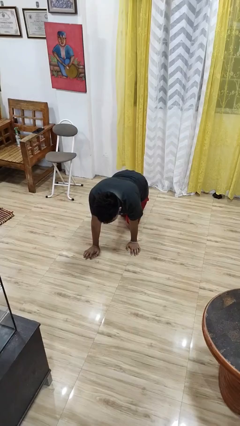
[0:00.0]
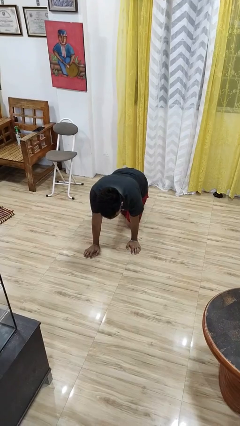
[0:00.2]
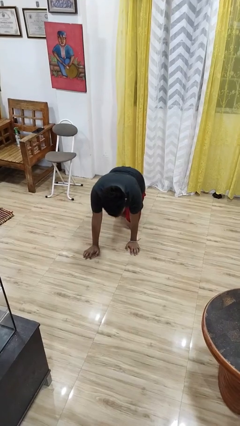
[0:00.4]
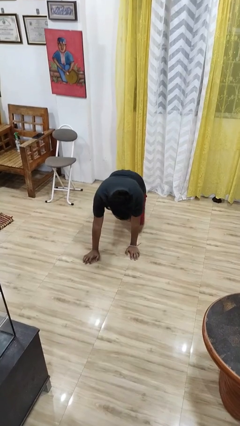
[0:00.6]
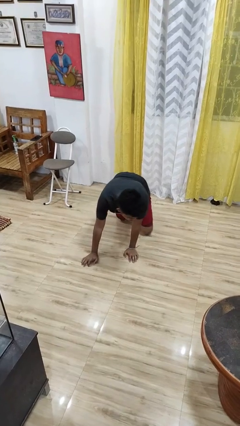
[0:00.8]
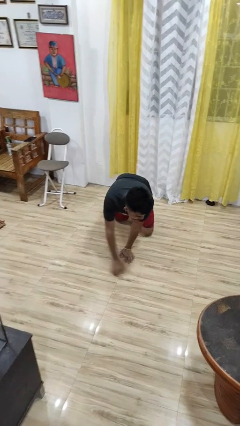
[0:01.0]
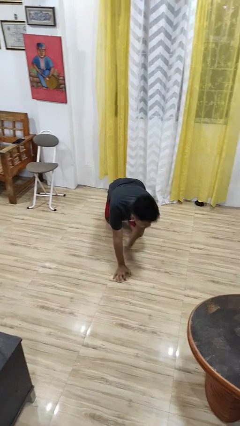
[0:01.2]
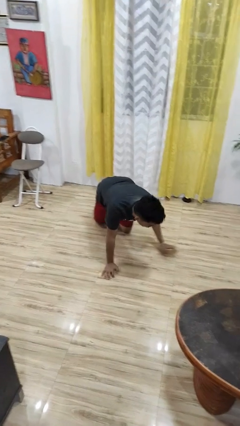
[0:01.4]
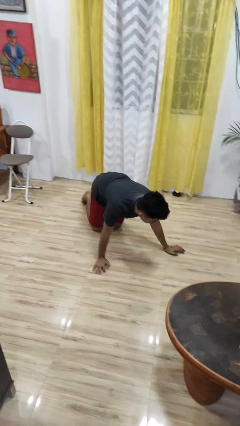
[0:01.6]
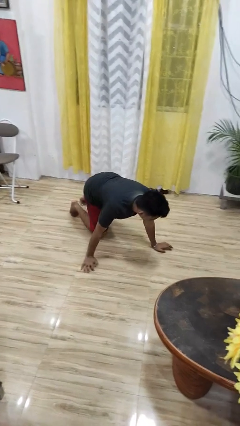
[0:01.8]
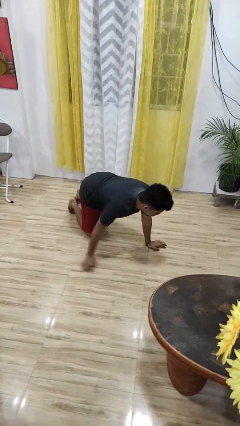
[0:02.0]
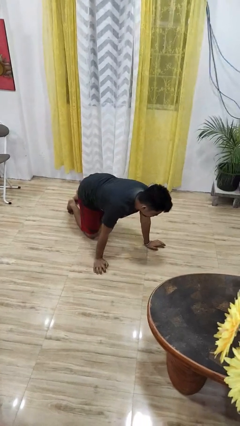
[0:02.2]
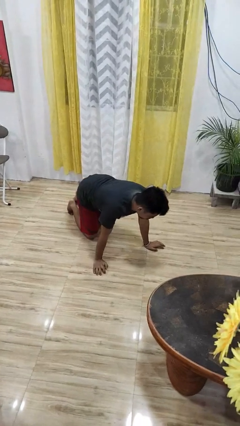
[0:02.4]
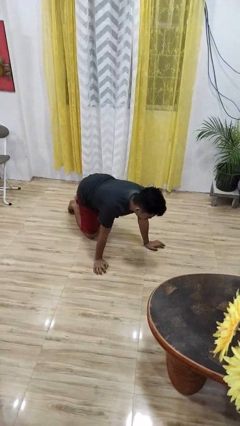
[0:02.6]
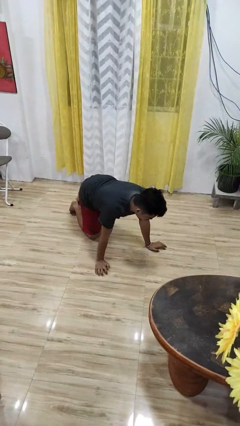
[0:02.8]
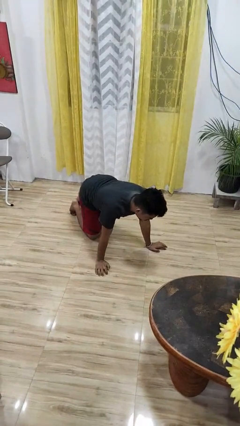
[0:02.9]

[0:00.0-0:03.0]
person crawls

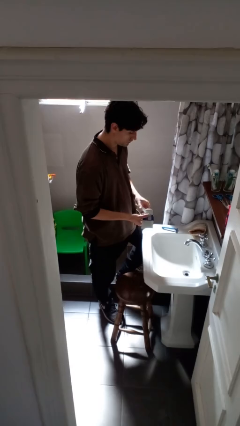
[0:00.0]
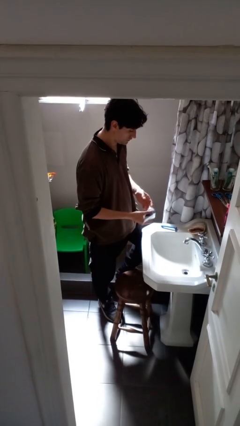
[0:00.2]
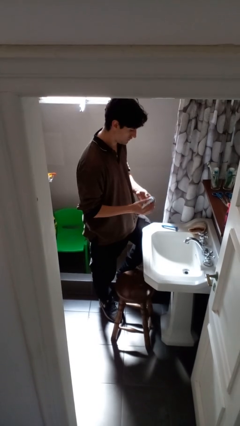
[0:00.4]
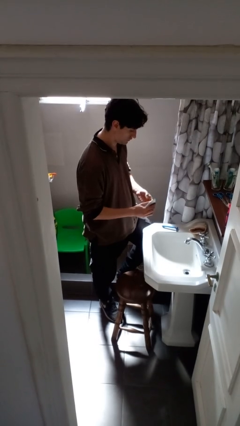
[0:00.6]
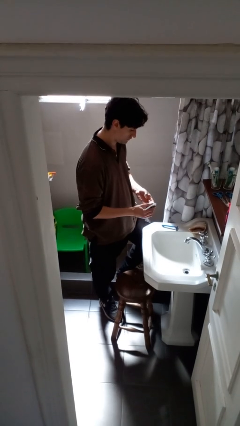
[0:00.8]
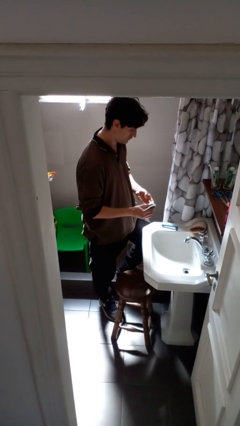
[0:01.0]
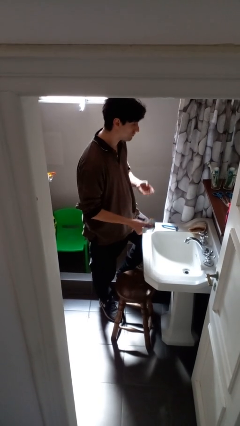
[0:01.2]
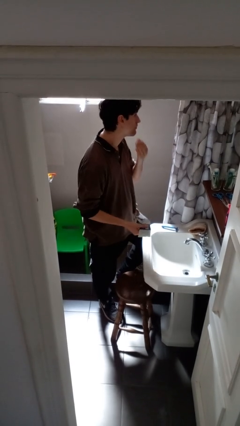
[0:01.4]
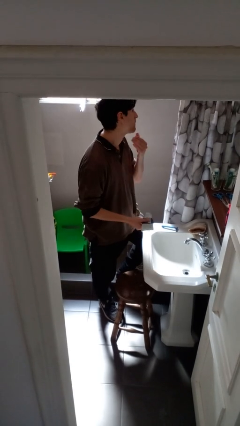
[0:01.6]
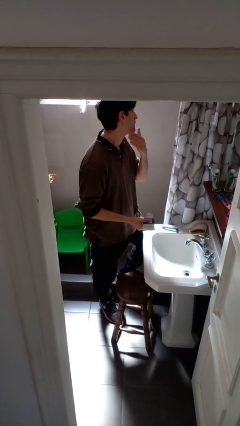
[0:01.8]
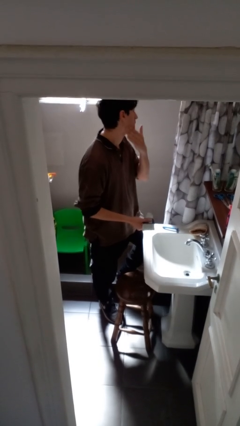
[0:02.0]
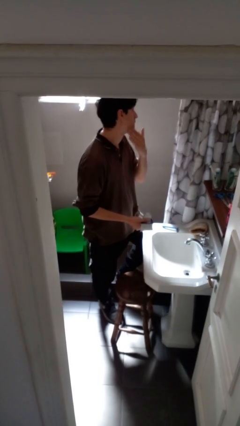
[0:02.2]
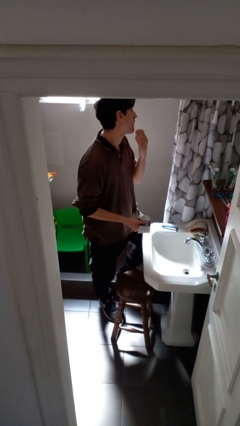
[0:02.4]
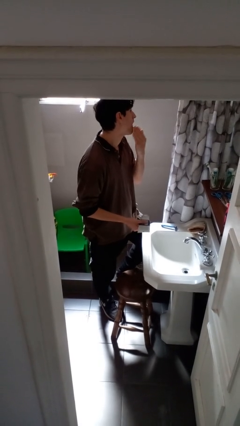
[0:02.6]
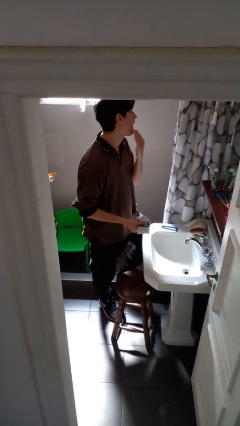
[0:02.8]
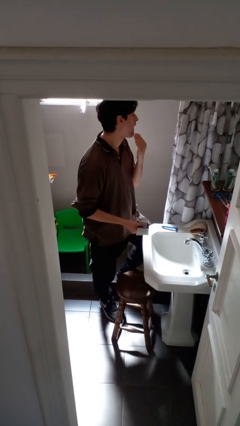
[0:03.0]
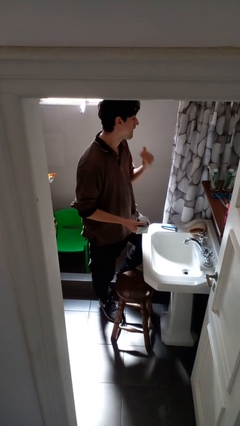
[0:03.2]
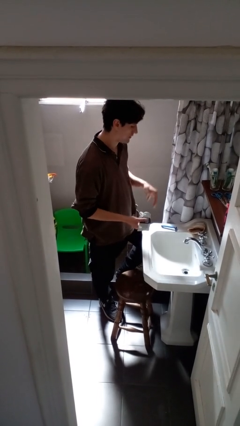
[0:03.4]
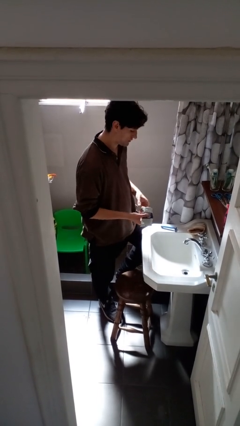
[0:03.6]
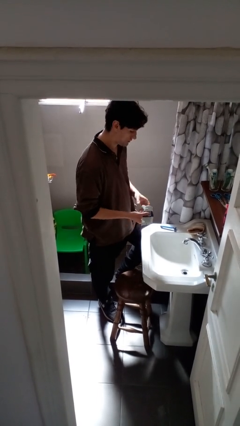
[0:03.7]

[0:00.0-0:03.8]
person applies shaving cream

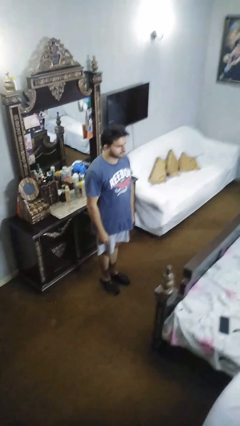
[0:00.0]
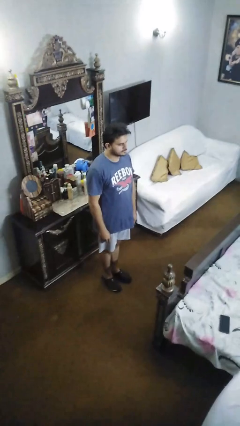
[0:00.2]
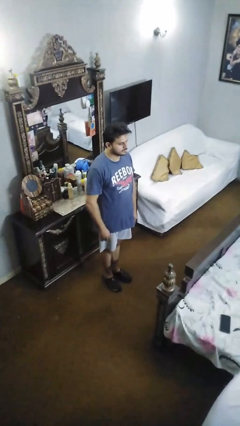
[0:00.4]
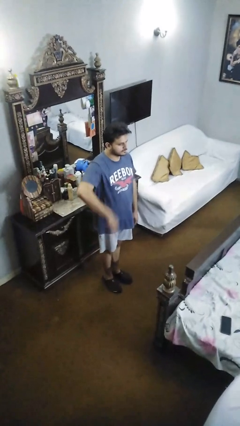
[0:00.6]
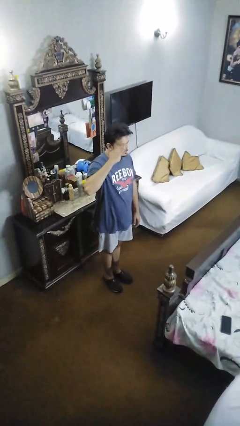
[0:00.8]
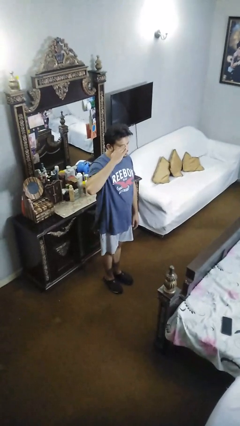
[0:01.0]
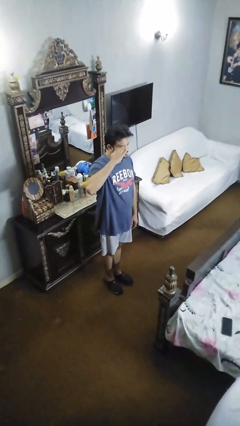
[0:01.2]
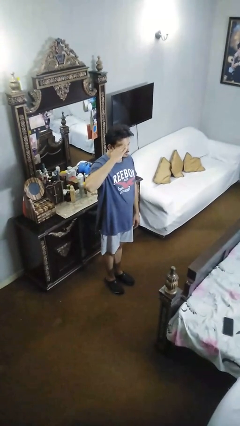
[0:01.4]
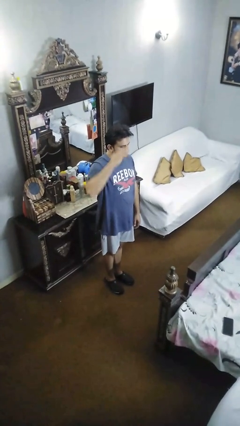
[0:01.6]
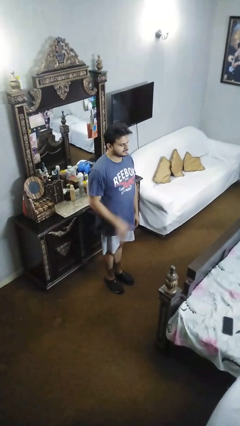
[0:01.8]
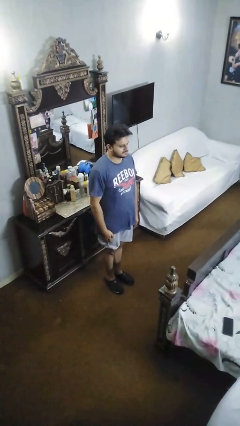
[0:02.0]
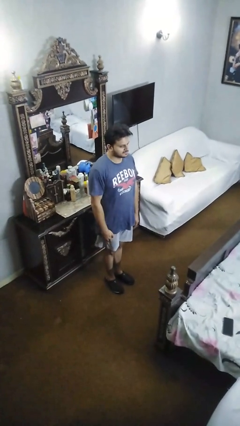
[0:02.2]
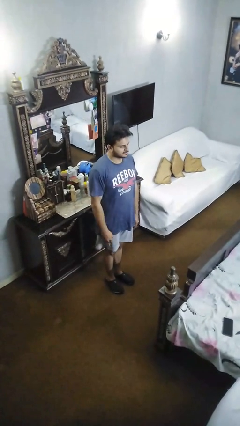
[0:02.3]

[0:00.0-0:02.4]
person salutes

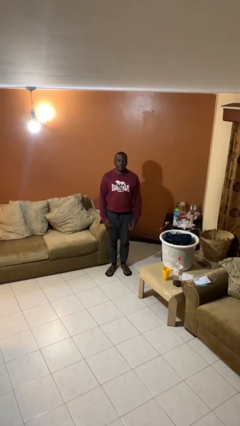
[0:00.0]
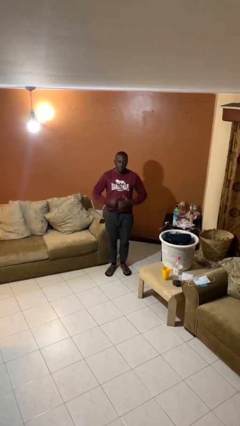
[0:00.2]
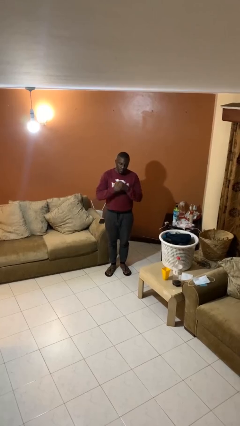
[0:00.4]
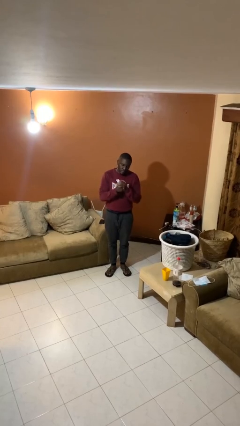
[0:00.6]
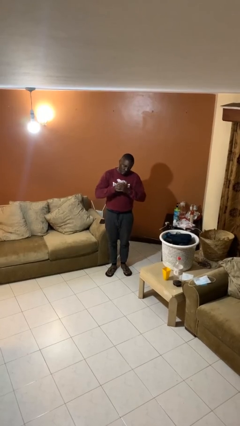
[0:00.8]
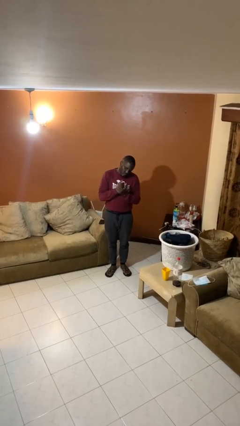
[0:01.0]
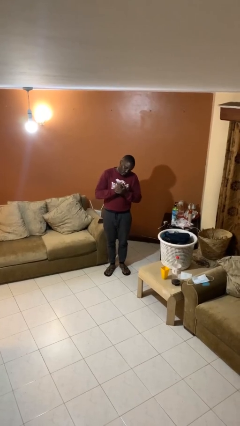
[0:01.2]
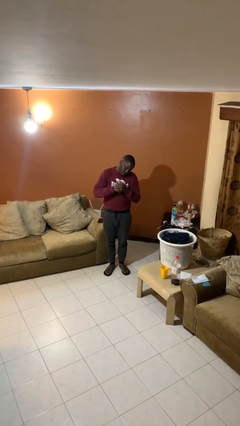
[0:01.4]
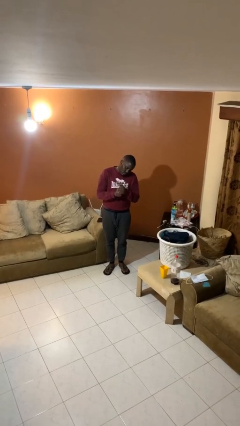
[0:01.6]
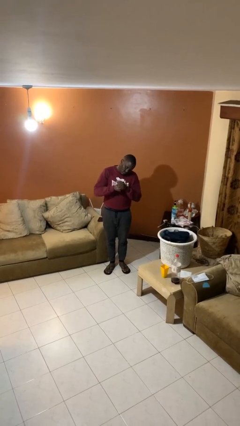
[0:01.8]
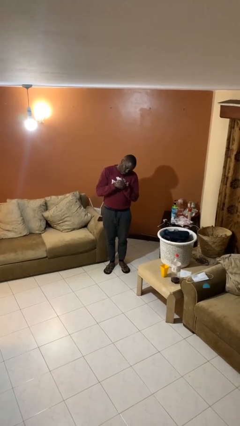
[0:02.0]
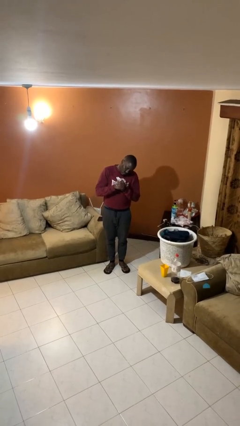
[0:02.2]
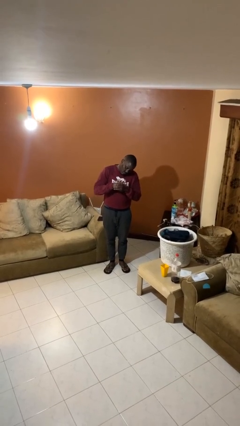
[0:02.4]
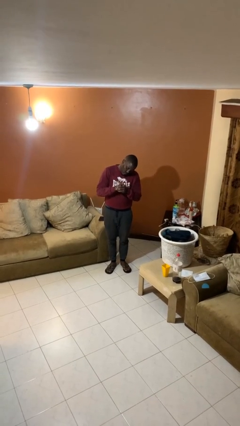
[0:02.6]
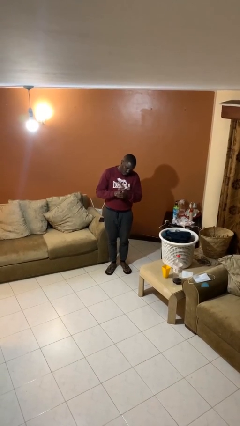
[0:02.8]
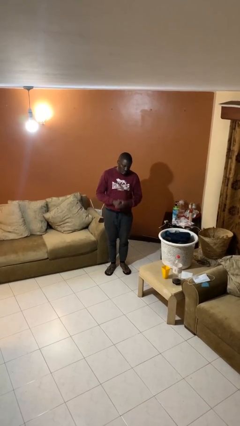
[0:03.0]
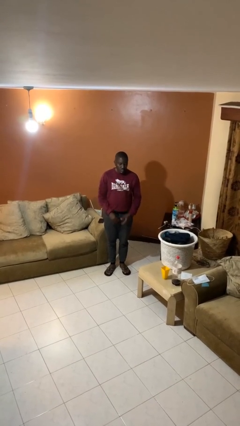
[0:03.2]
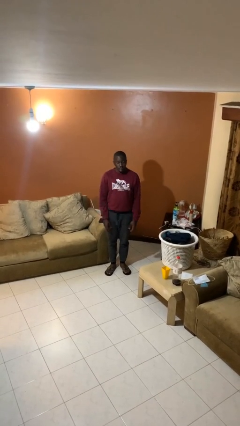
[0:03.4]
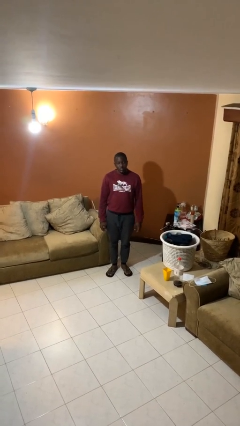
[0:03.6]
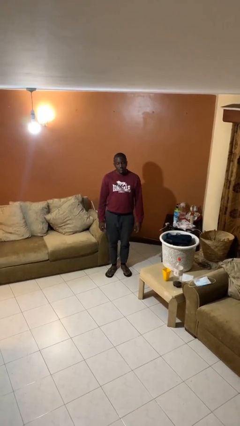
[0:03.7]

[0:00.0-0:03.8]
person cracks knuckles

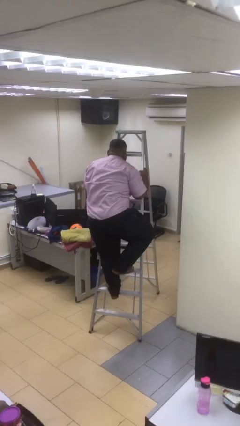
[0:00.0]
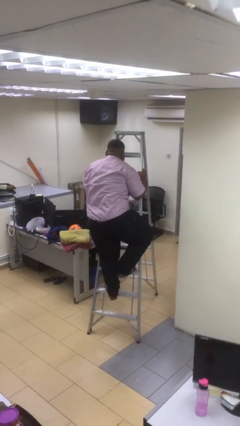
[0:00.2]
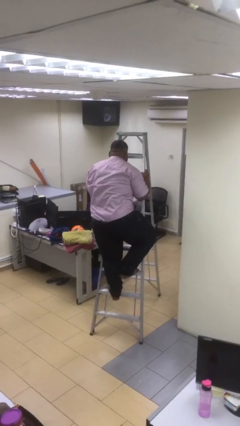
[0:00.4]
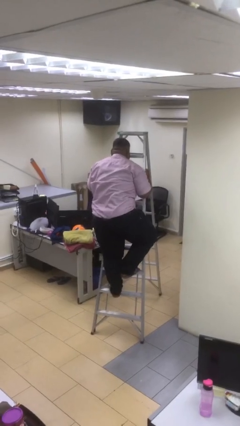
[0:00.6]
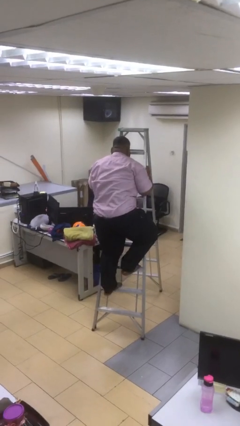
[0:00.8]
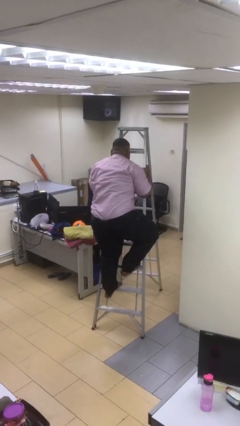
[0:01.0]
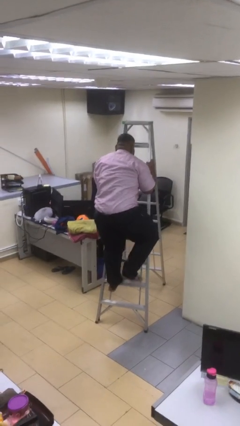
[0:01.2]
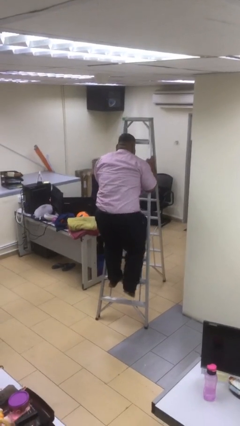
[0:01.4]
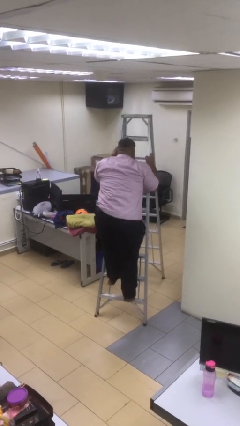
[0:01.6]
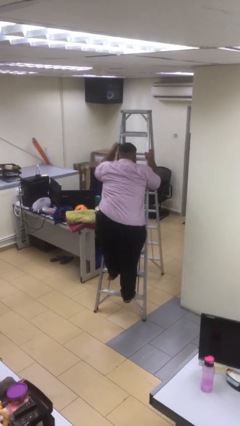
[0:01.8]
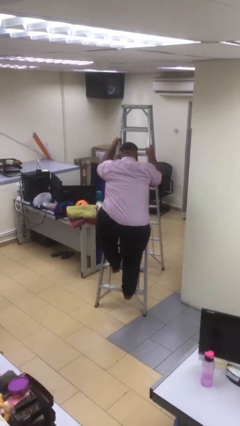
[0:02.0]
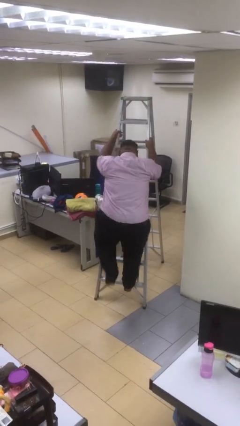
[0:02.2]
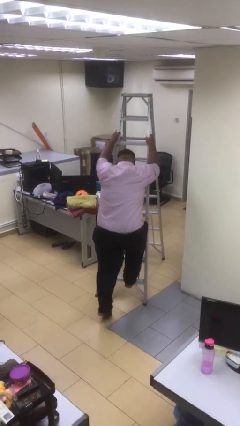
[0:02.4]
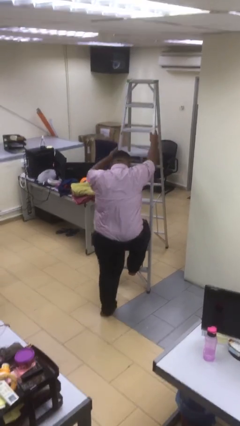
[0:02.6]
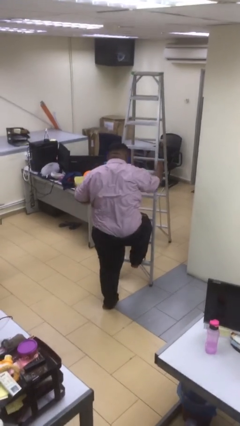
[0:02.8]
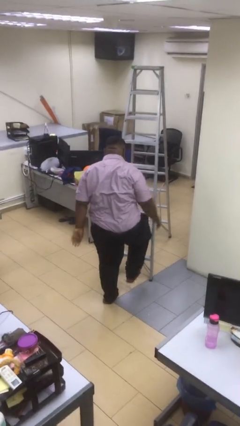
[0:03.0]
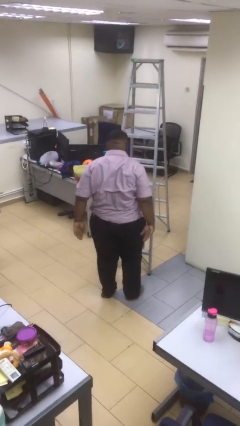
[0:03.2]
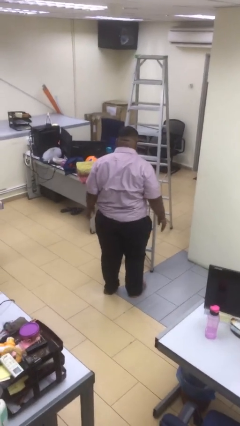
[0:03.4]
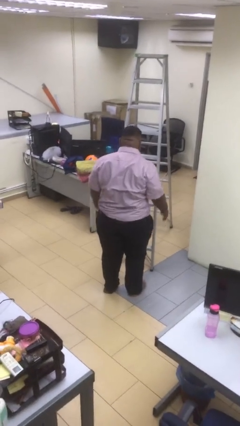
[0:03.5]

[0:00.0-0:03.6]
person climbs down ladder

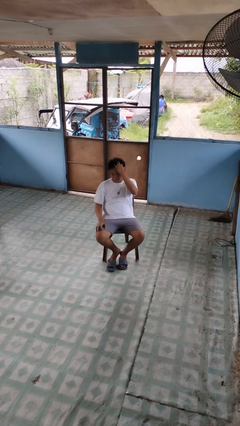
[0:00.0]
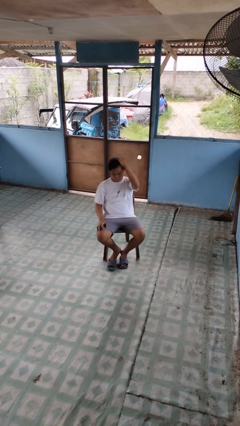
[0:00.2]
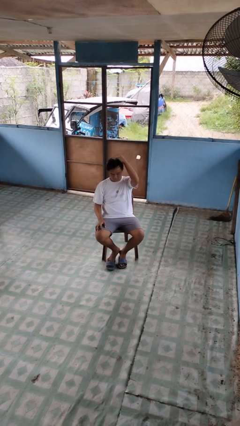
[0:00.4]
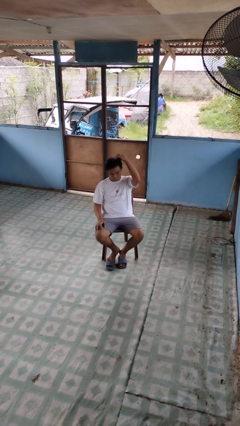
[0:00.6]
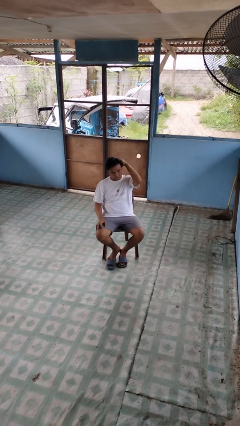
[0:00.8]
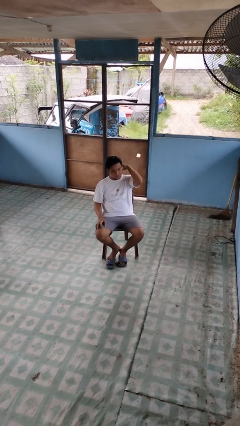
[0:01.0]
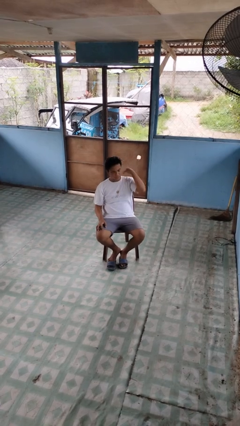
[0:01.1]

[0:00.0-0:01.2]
person strokes hair
